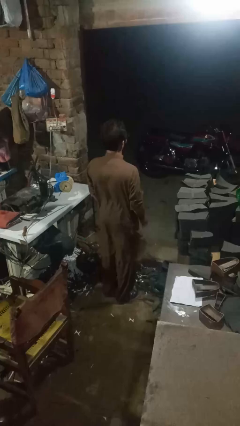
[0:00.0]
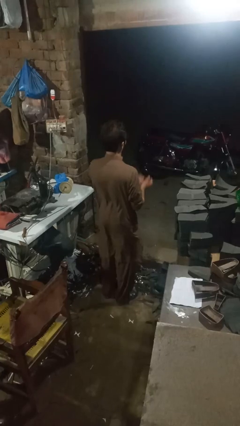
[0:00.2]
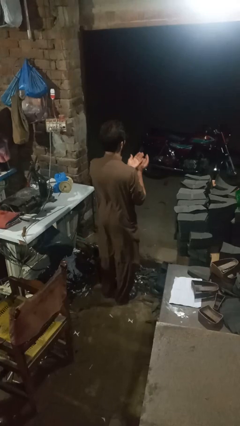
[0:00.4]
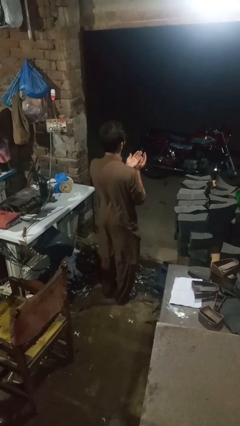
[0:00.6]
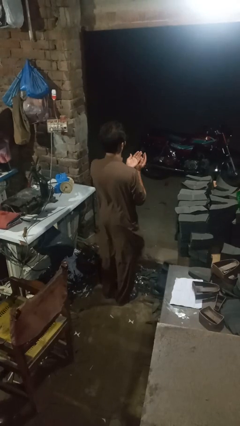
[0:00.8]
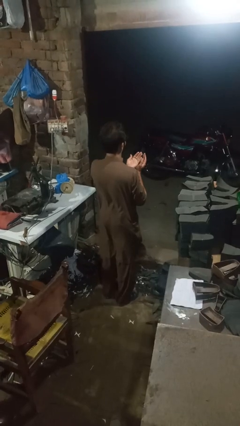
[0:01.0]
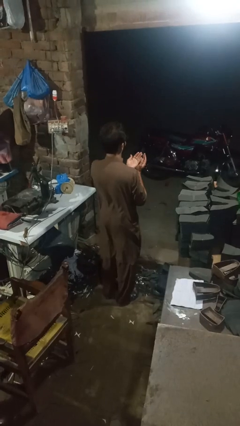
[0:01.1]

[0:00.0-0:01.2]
person prays

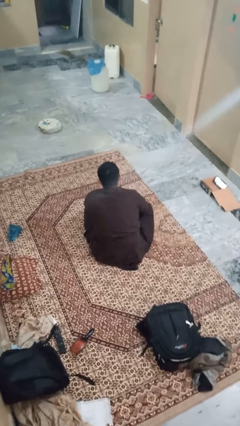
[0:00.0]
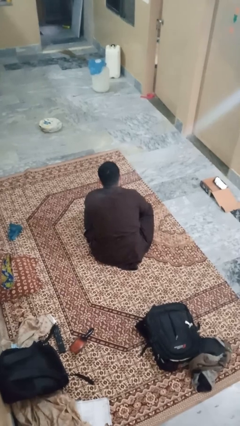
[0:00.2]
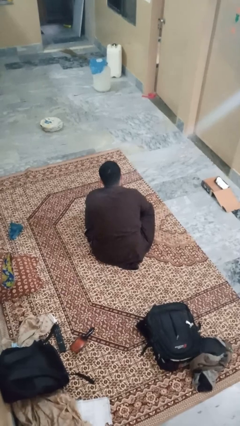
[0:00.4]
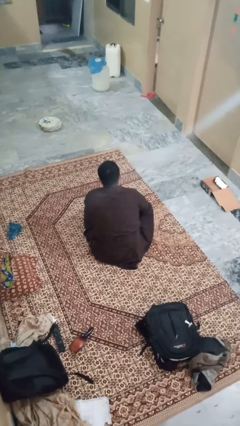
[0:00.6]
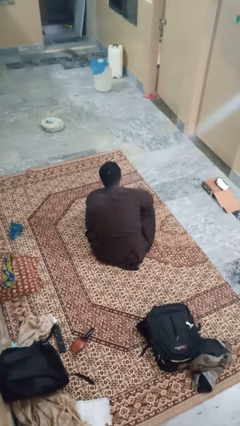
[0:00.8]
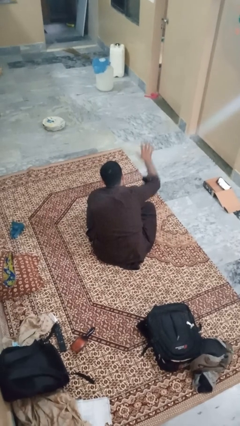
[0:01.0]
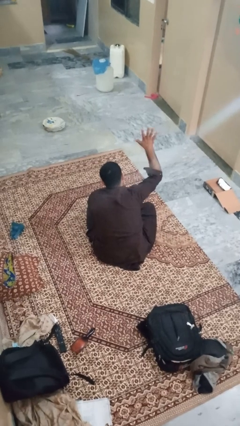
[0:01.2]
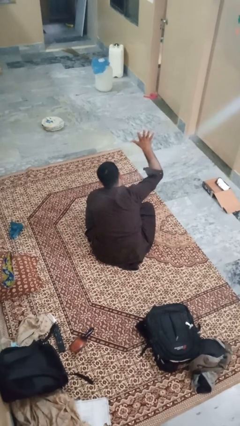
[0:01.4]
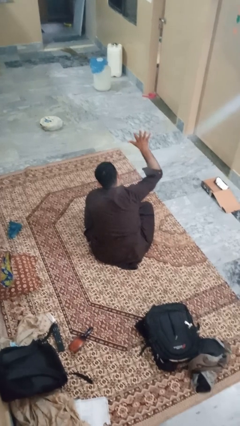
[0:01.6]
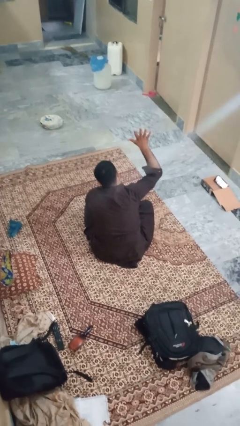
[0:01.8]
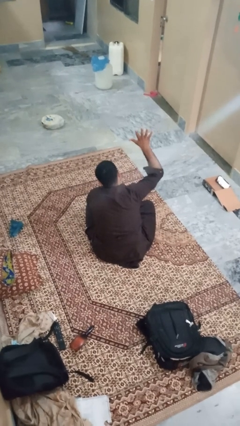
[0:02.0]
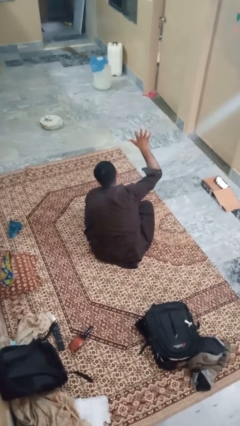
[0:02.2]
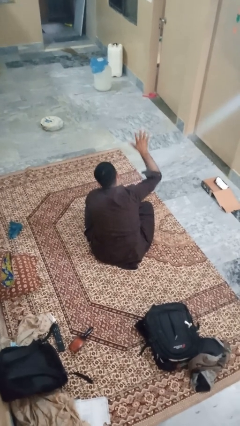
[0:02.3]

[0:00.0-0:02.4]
person gestures number five

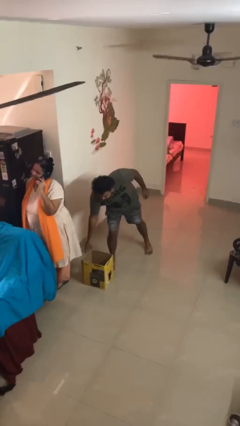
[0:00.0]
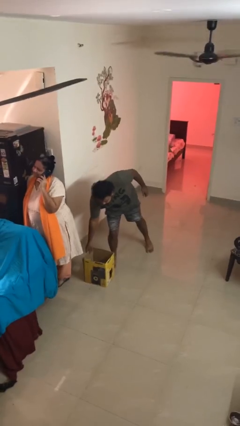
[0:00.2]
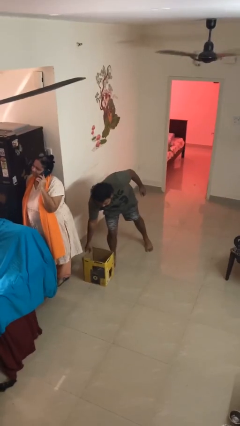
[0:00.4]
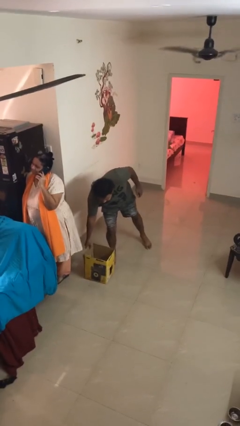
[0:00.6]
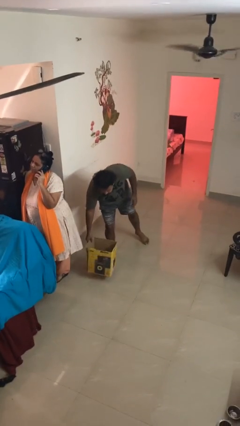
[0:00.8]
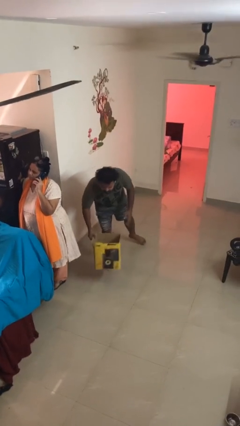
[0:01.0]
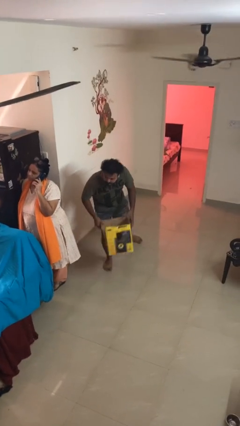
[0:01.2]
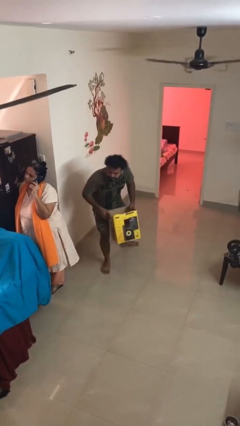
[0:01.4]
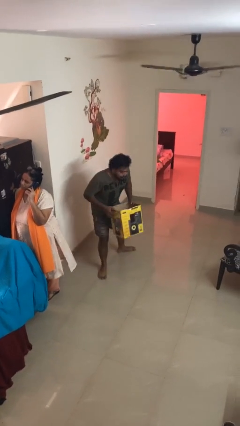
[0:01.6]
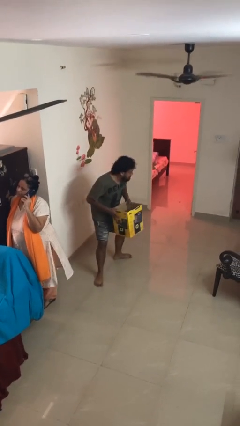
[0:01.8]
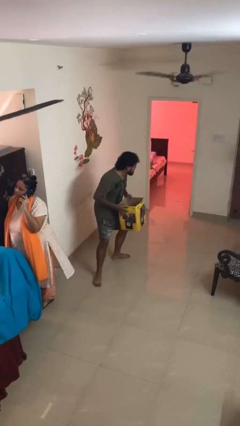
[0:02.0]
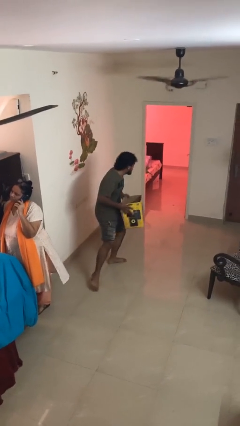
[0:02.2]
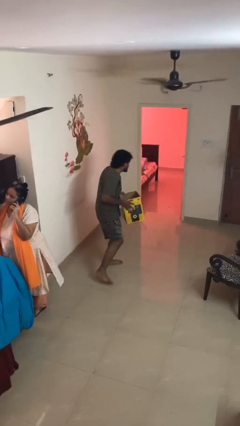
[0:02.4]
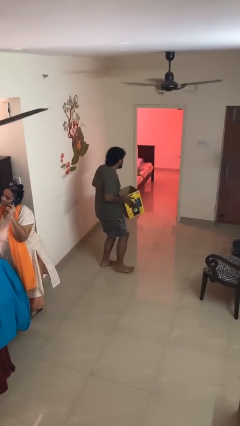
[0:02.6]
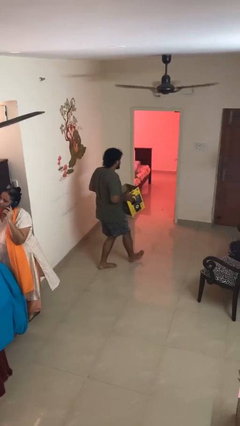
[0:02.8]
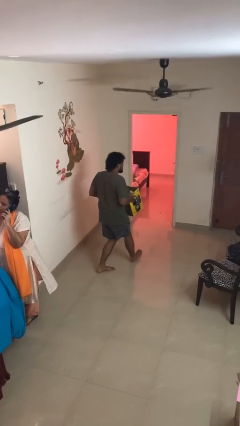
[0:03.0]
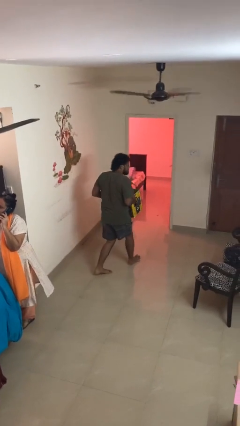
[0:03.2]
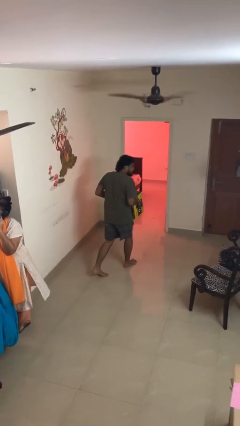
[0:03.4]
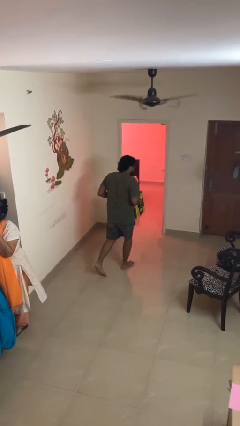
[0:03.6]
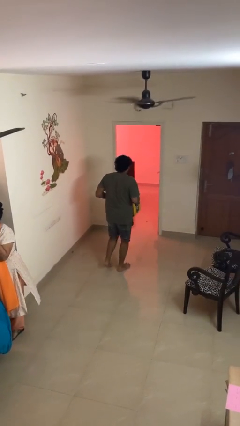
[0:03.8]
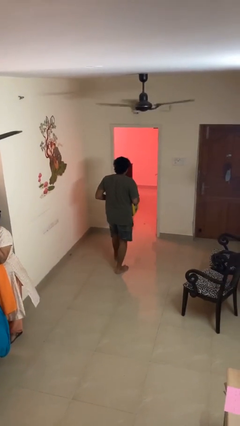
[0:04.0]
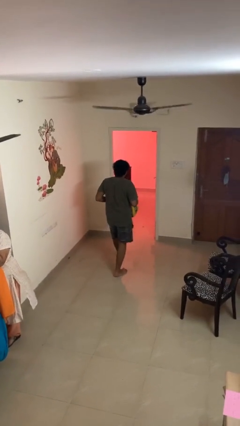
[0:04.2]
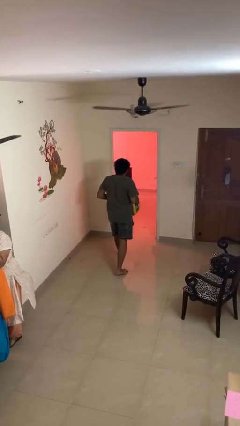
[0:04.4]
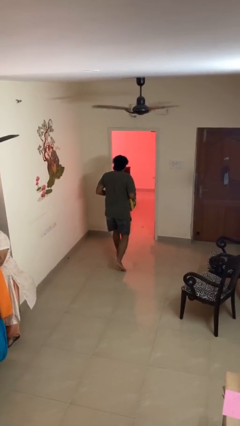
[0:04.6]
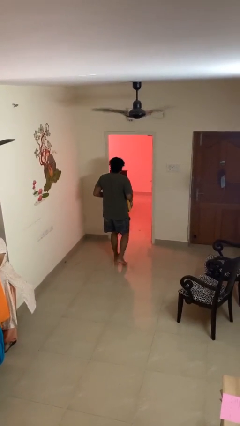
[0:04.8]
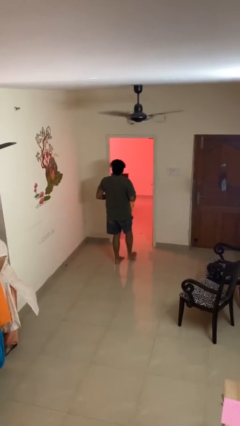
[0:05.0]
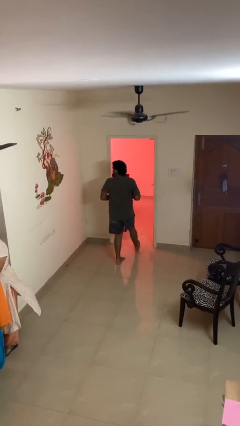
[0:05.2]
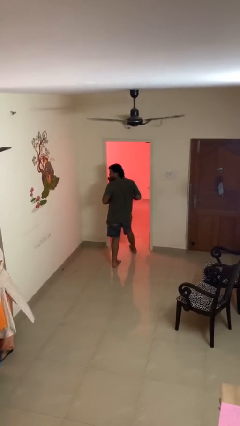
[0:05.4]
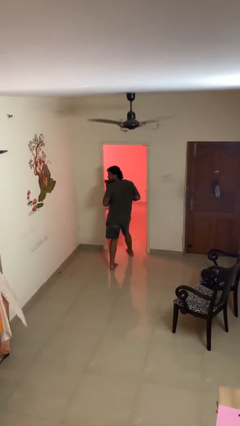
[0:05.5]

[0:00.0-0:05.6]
person steals object from person

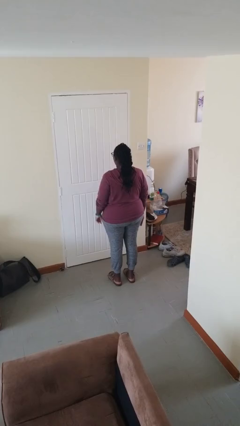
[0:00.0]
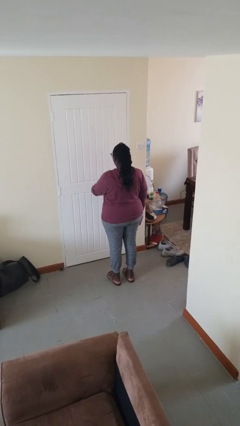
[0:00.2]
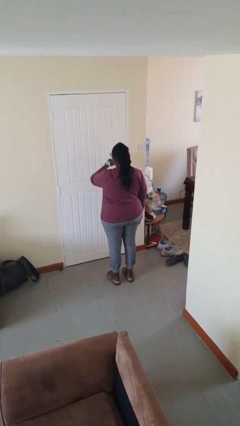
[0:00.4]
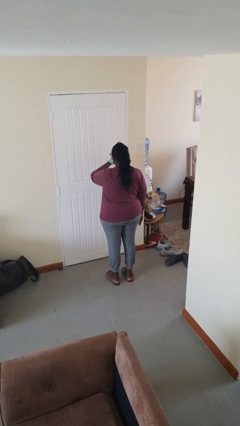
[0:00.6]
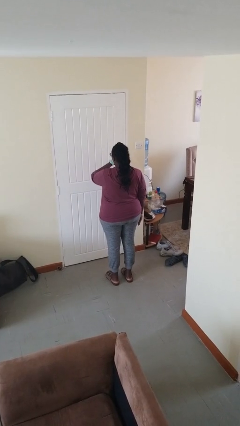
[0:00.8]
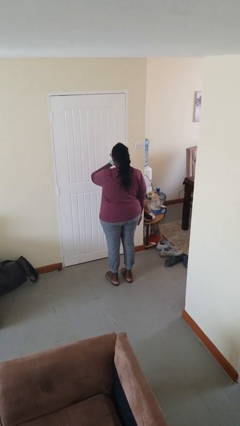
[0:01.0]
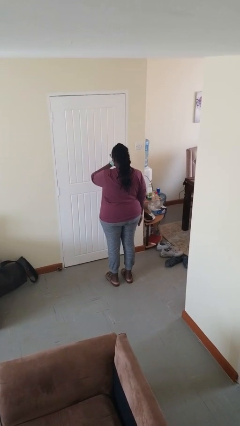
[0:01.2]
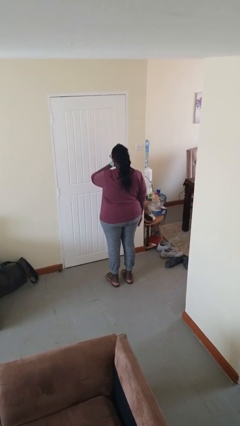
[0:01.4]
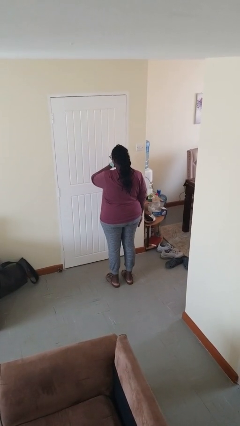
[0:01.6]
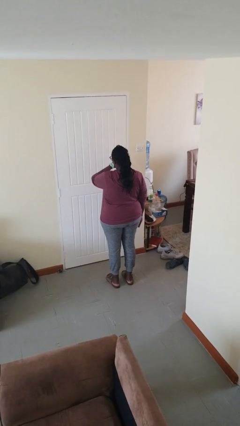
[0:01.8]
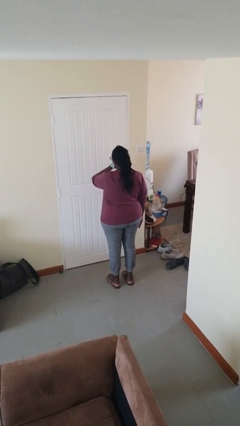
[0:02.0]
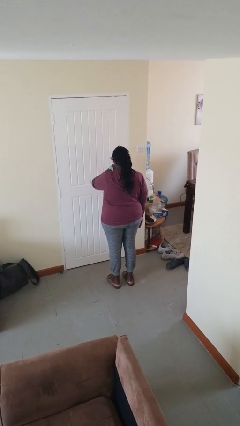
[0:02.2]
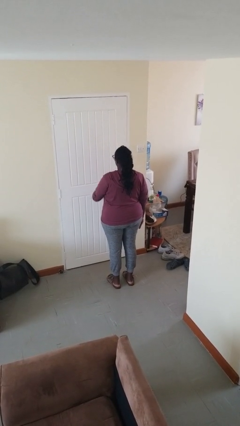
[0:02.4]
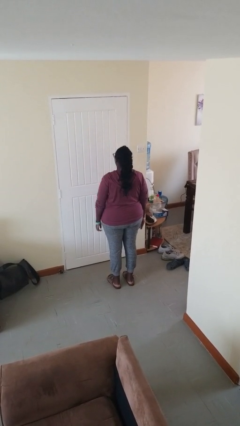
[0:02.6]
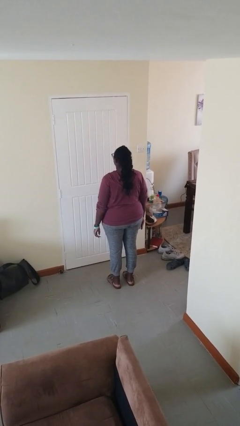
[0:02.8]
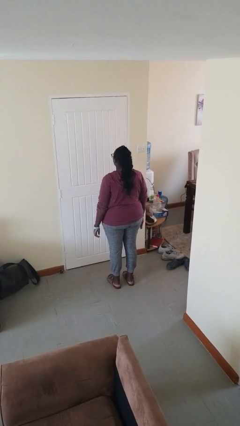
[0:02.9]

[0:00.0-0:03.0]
person looks at wristwatch

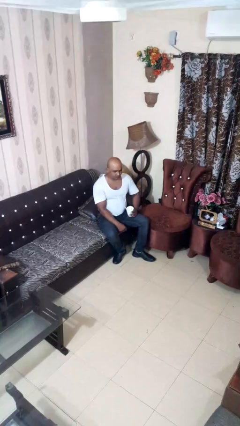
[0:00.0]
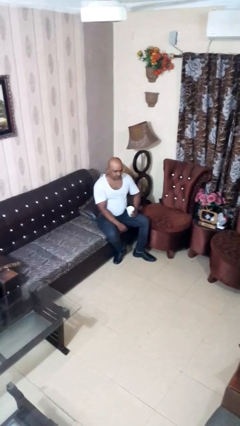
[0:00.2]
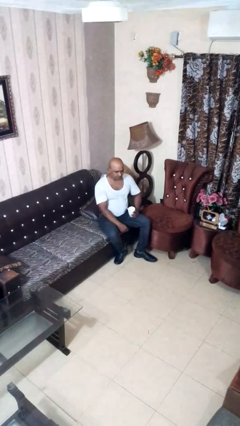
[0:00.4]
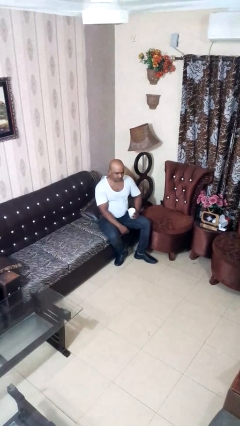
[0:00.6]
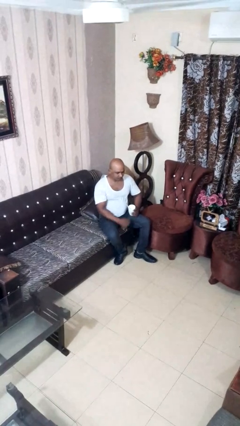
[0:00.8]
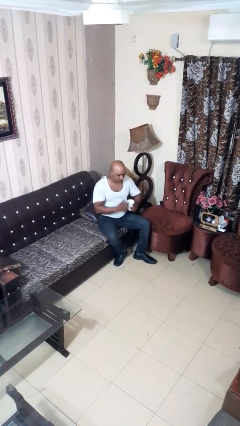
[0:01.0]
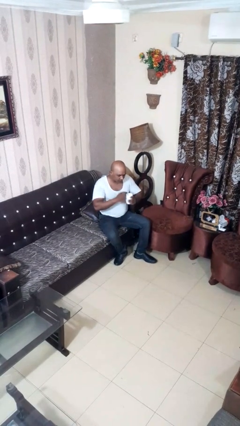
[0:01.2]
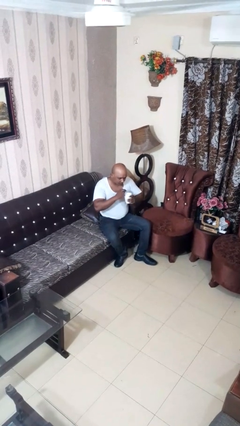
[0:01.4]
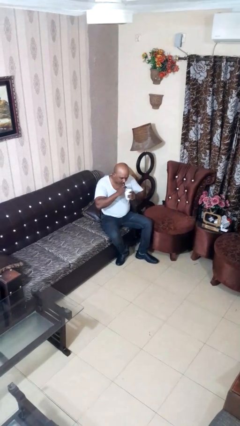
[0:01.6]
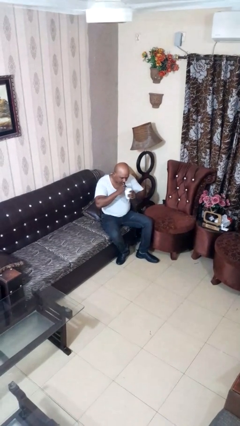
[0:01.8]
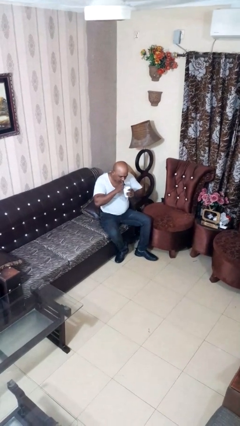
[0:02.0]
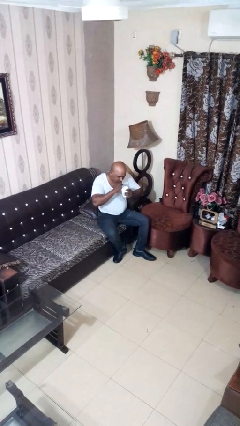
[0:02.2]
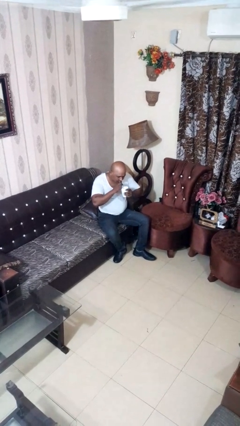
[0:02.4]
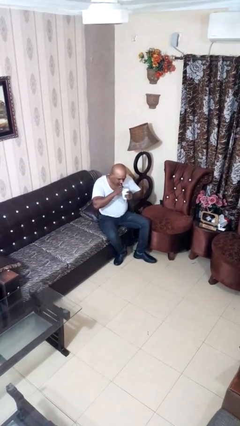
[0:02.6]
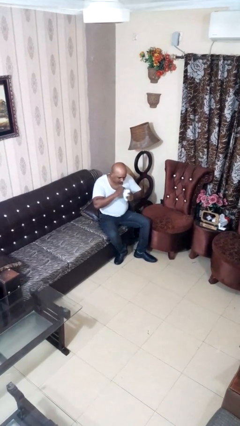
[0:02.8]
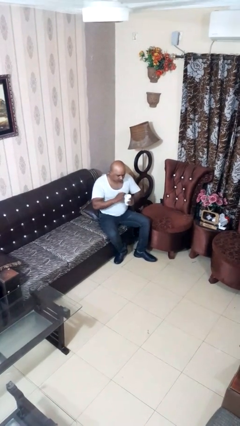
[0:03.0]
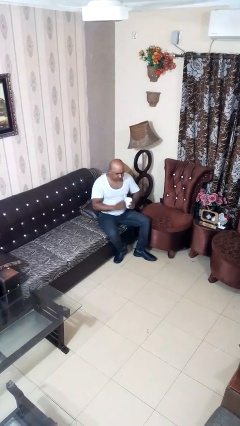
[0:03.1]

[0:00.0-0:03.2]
person drinks from straw

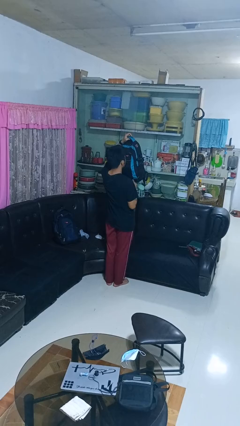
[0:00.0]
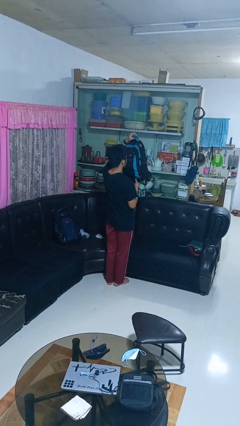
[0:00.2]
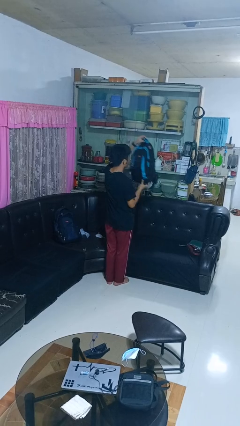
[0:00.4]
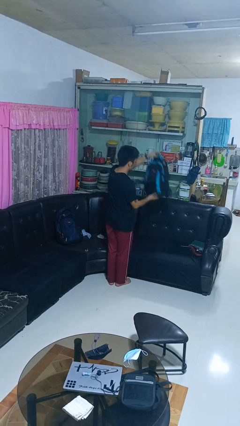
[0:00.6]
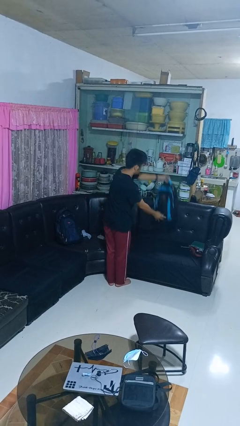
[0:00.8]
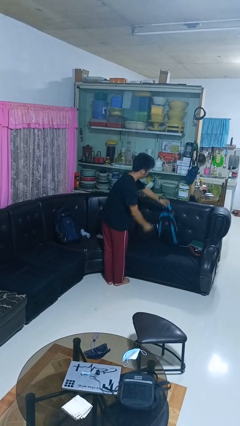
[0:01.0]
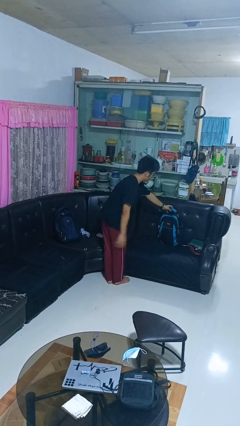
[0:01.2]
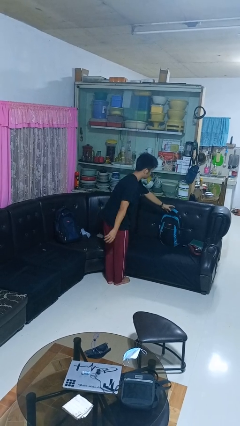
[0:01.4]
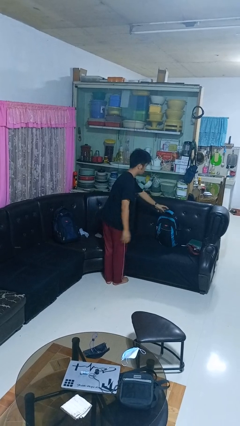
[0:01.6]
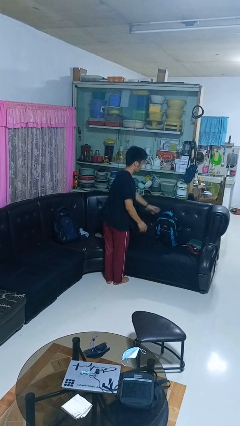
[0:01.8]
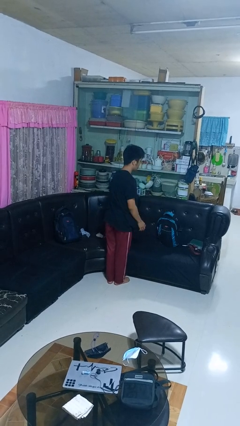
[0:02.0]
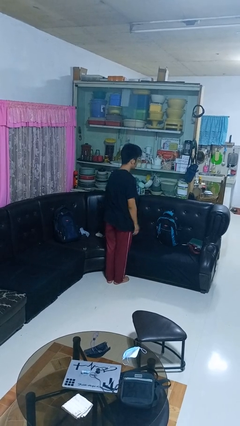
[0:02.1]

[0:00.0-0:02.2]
person puts down object on couch
